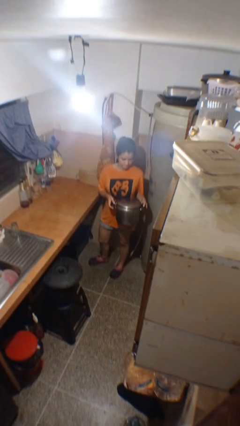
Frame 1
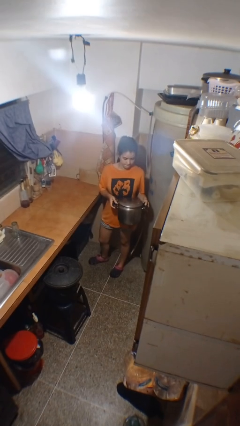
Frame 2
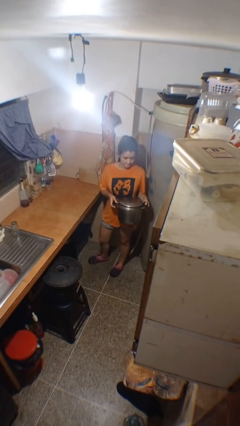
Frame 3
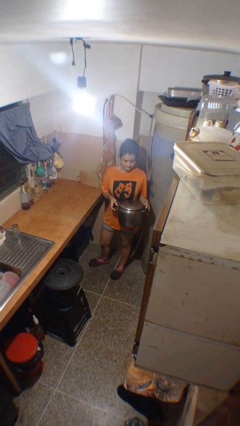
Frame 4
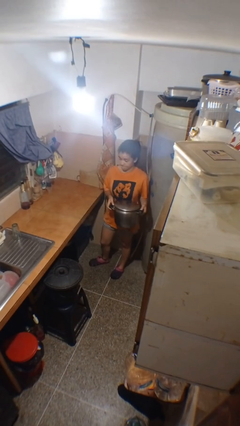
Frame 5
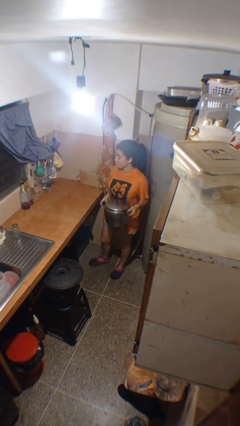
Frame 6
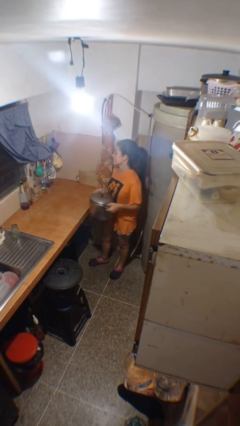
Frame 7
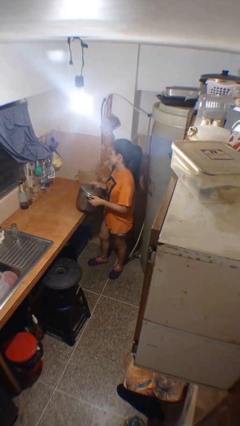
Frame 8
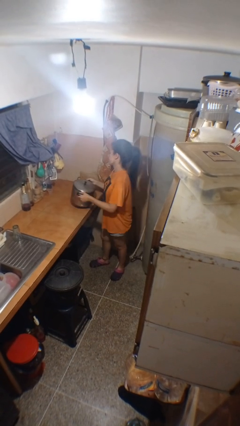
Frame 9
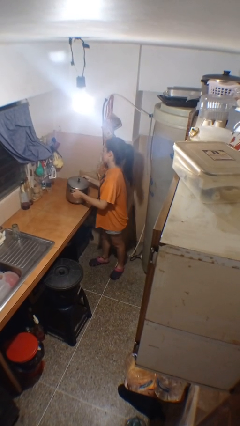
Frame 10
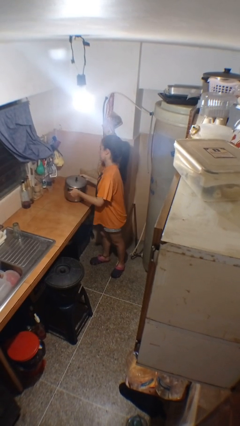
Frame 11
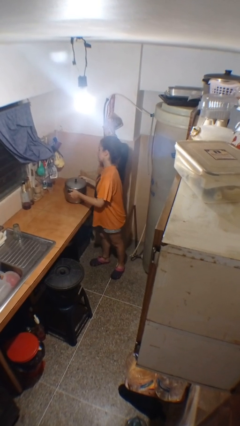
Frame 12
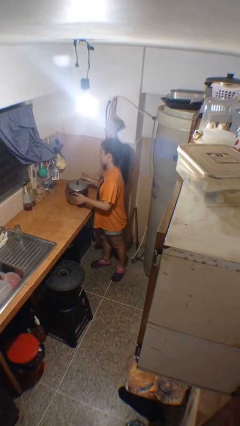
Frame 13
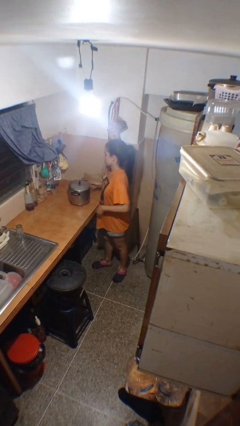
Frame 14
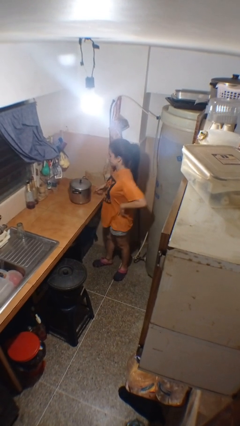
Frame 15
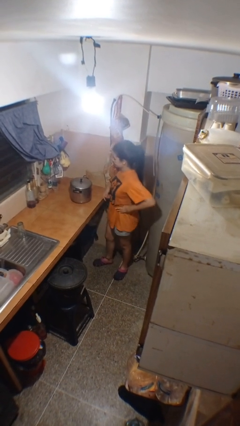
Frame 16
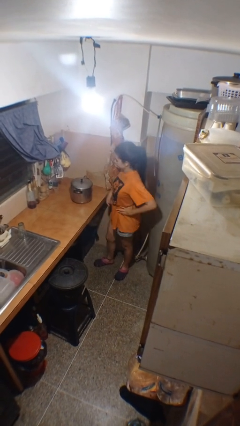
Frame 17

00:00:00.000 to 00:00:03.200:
person puts down object on countertop

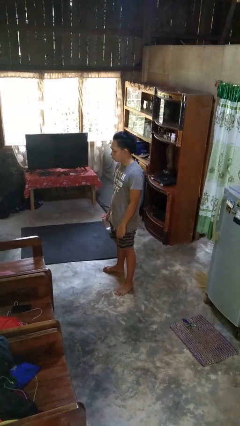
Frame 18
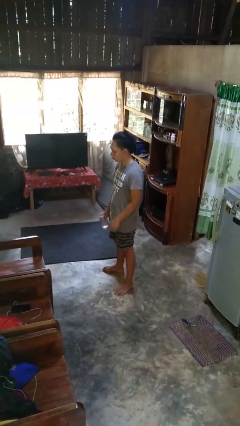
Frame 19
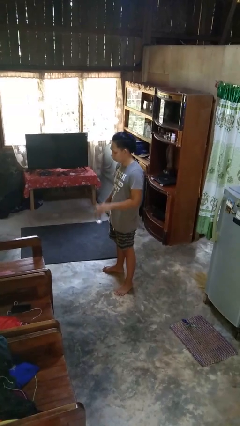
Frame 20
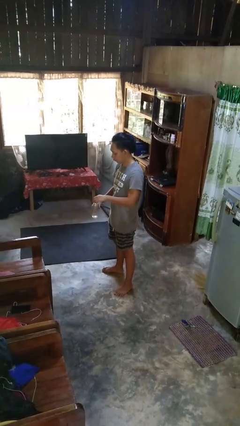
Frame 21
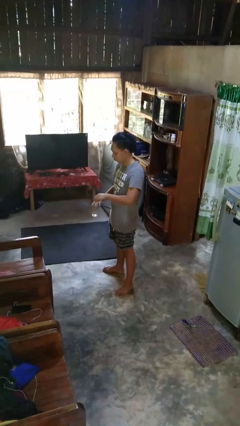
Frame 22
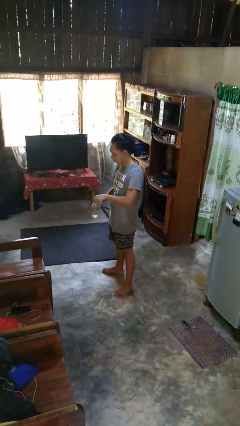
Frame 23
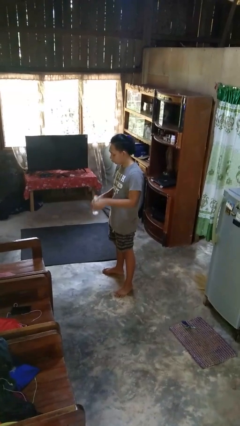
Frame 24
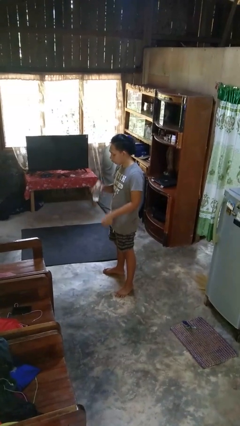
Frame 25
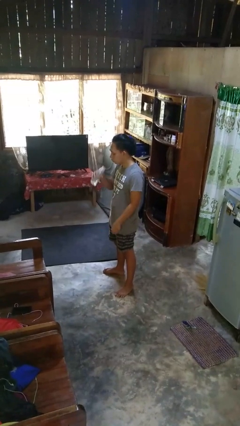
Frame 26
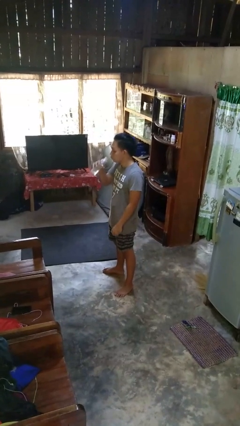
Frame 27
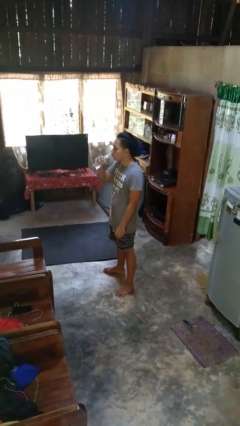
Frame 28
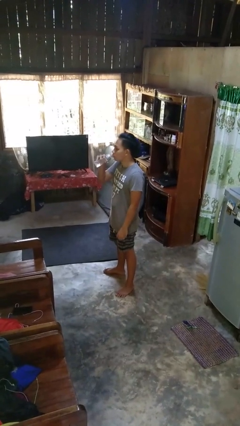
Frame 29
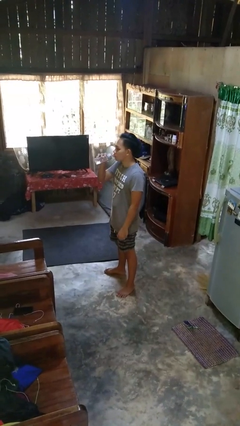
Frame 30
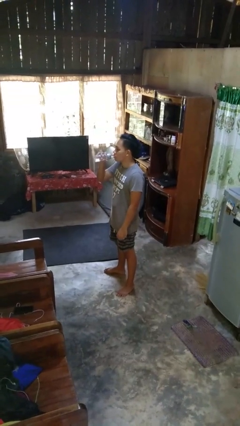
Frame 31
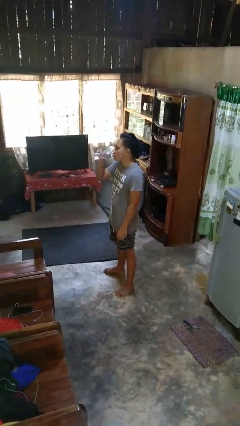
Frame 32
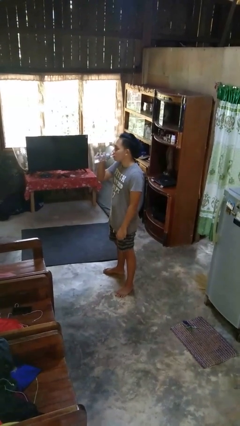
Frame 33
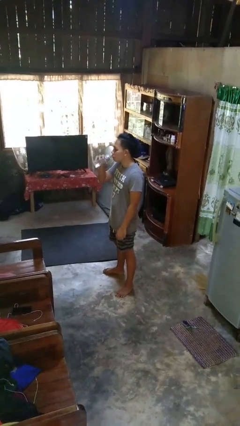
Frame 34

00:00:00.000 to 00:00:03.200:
person drinks from bottle

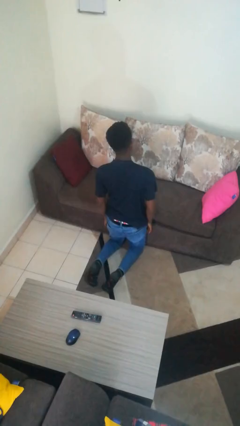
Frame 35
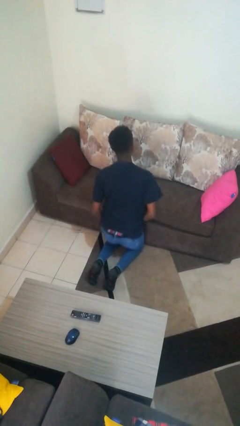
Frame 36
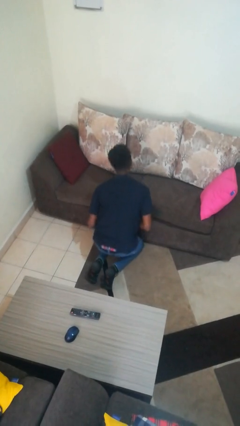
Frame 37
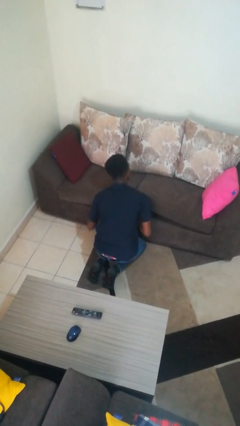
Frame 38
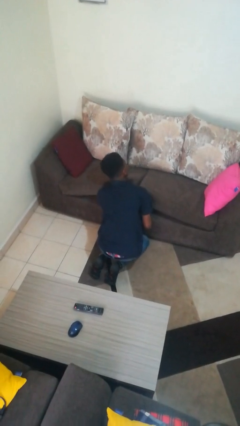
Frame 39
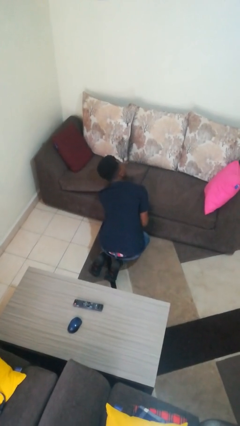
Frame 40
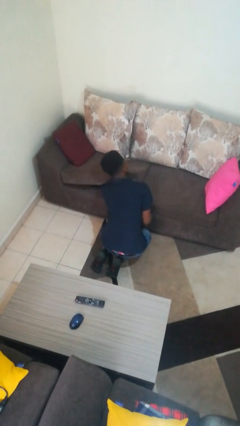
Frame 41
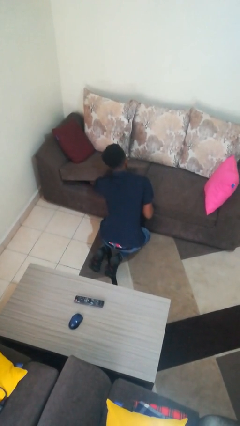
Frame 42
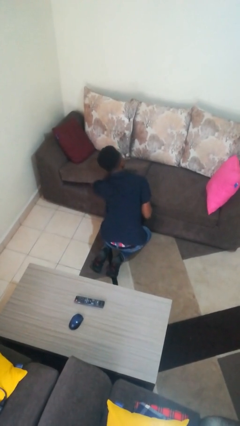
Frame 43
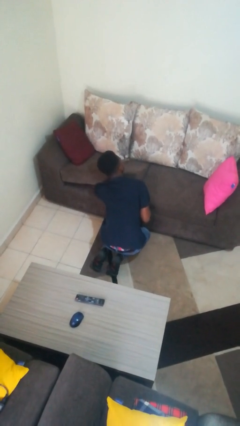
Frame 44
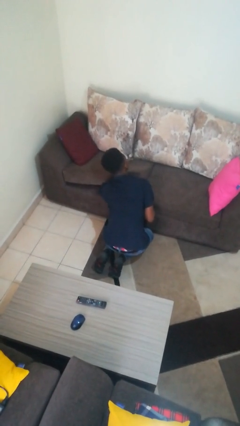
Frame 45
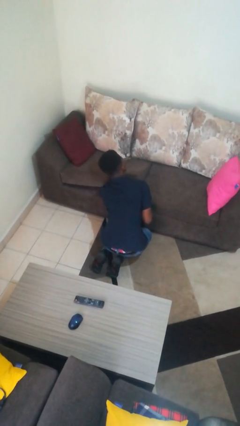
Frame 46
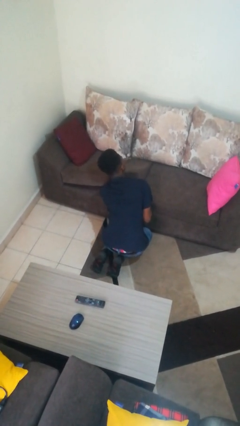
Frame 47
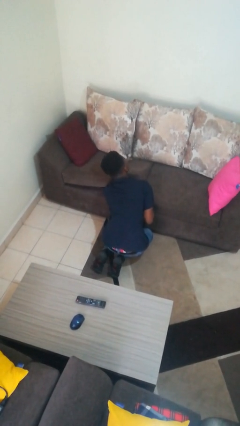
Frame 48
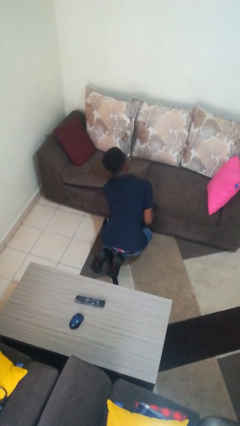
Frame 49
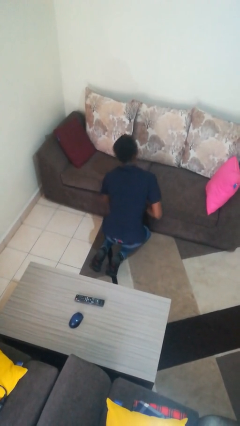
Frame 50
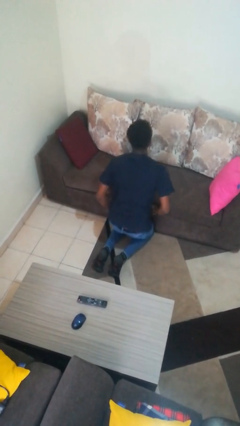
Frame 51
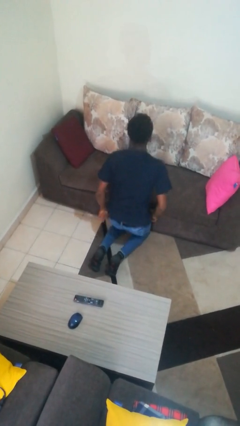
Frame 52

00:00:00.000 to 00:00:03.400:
person searches under couch

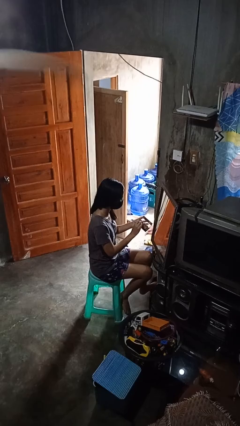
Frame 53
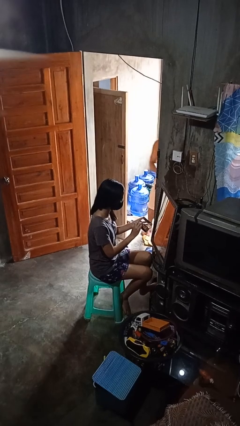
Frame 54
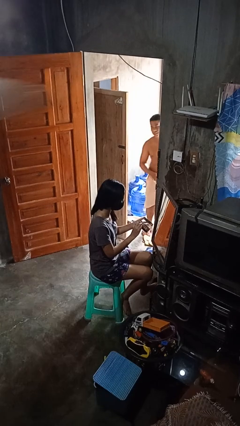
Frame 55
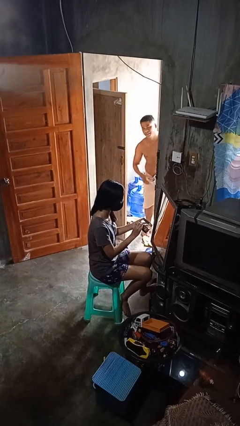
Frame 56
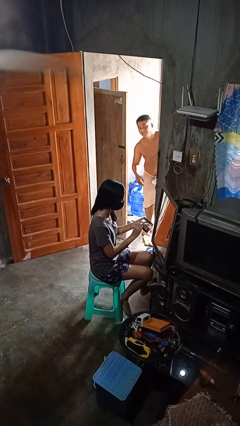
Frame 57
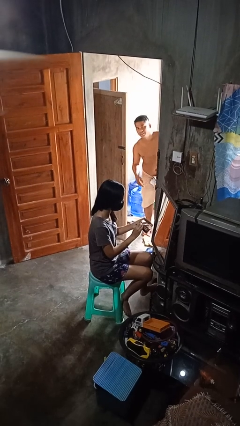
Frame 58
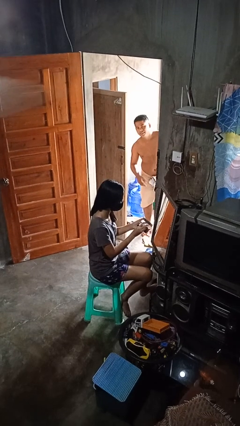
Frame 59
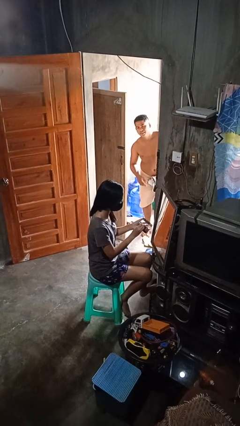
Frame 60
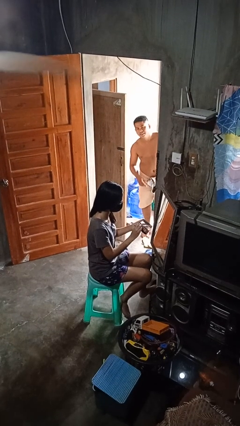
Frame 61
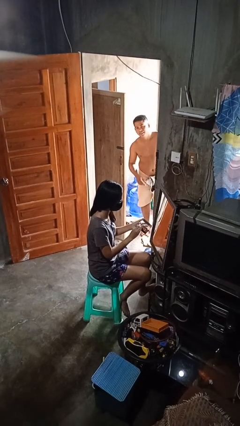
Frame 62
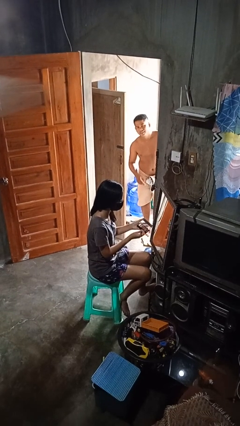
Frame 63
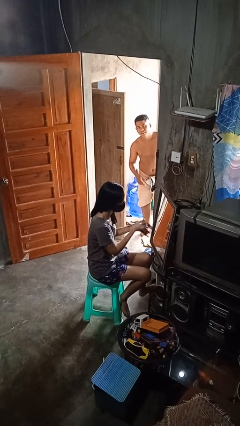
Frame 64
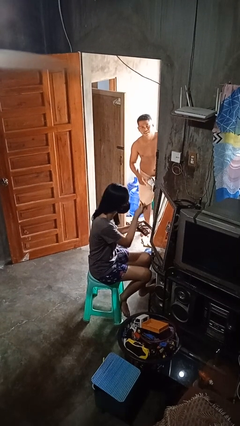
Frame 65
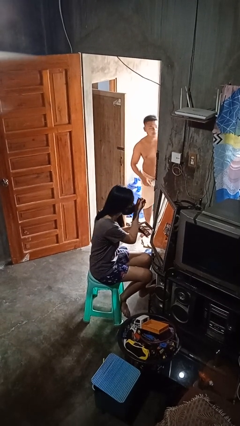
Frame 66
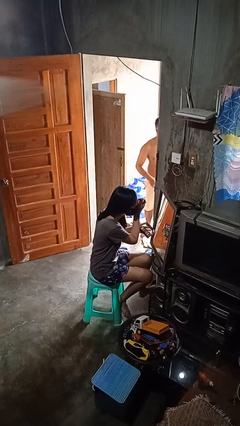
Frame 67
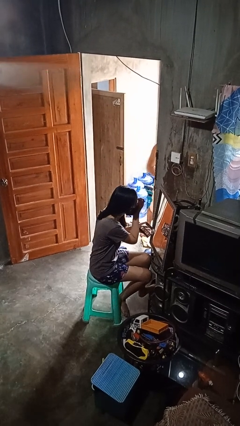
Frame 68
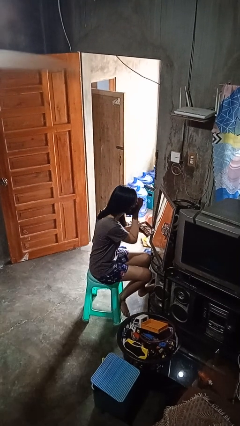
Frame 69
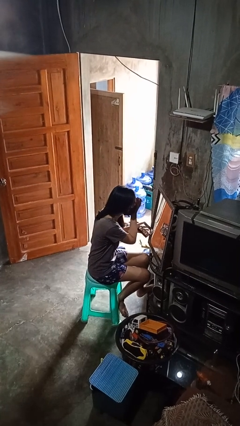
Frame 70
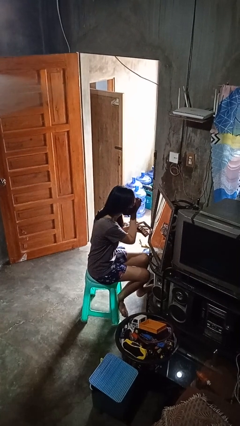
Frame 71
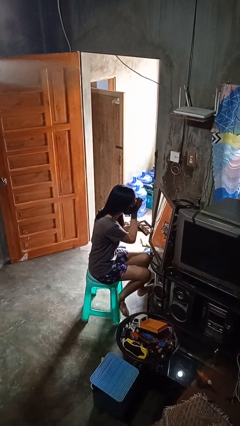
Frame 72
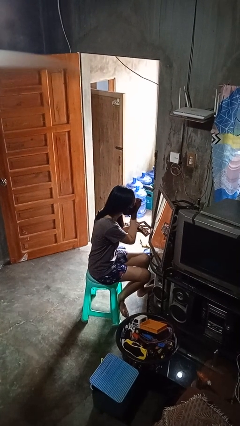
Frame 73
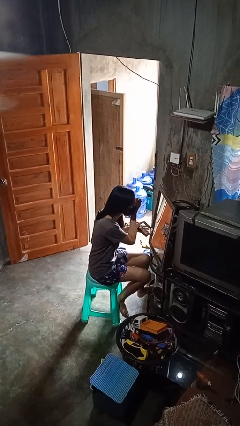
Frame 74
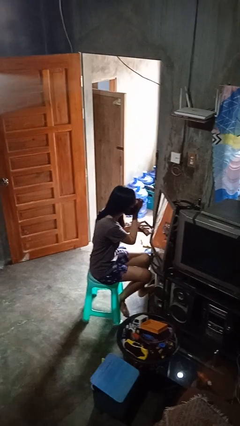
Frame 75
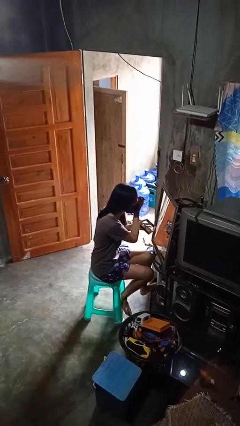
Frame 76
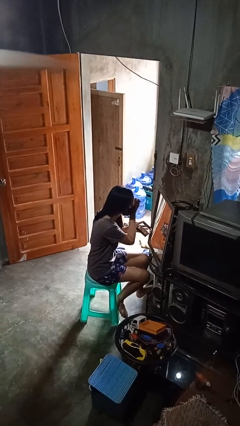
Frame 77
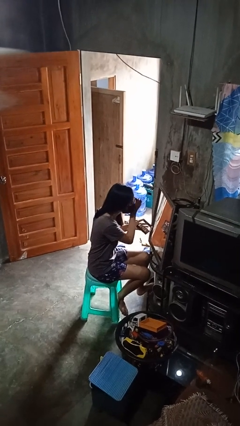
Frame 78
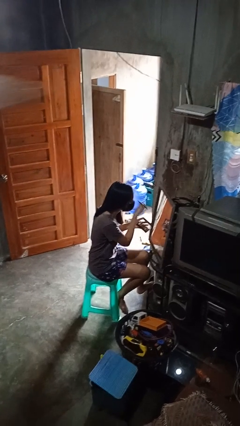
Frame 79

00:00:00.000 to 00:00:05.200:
person applies eye makeup

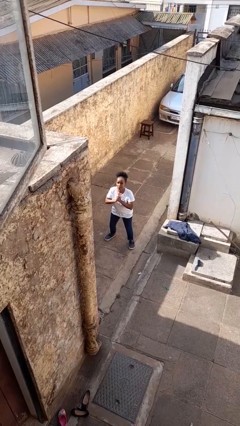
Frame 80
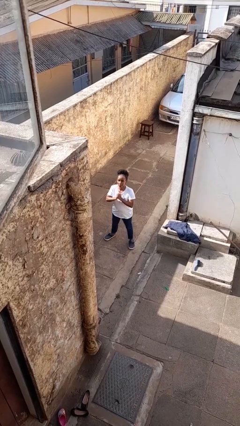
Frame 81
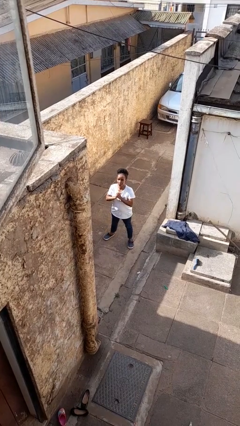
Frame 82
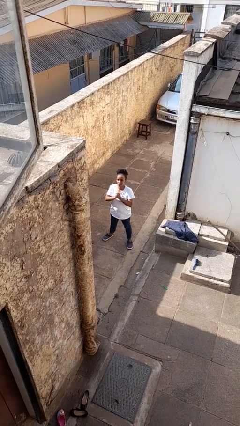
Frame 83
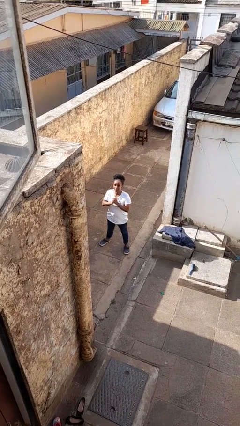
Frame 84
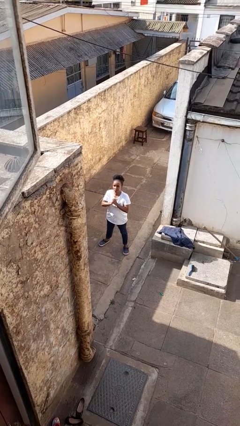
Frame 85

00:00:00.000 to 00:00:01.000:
person stands up

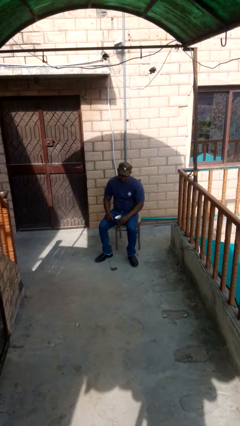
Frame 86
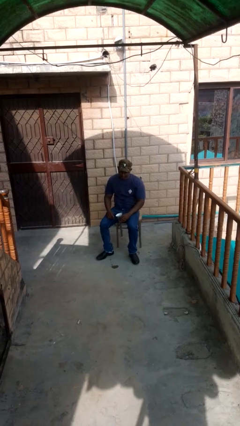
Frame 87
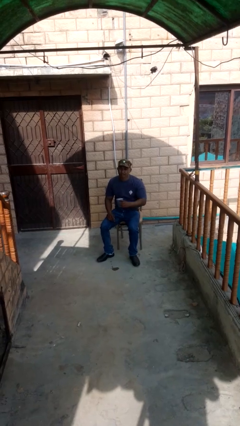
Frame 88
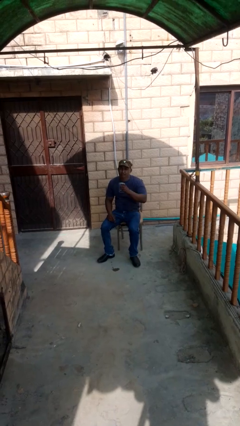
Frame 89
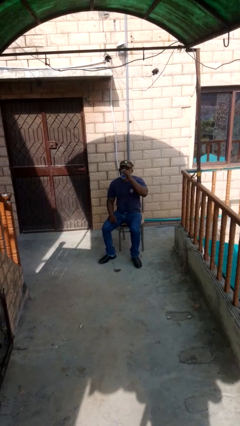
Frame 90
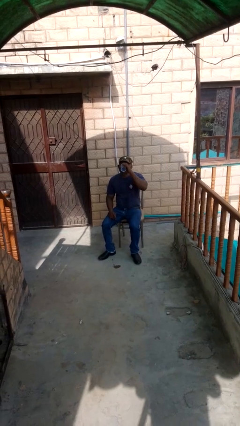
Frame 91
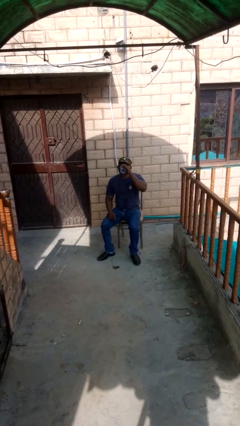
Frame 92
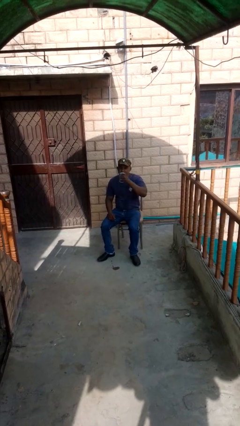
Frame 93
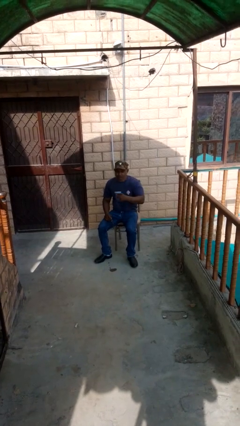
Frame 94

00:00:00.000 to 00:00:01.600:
person drinks from mug
